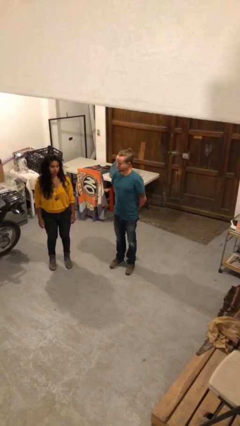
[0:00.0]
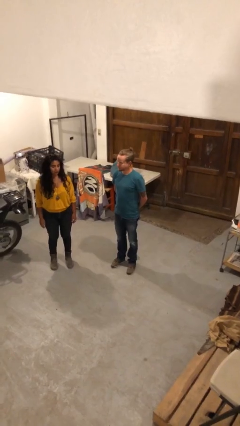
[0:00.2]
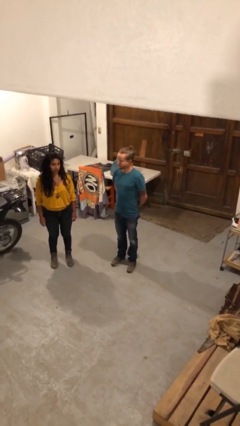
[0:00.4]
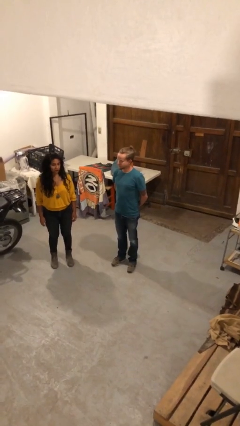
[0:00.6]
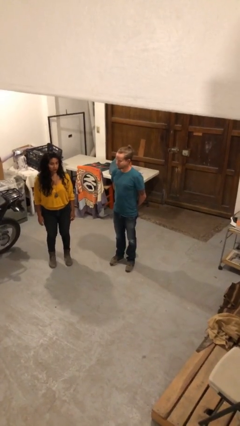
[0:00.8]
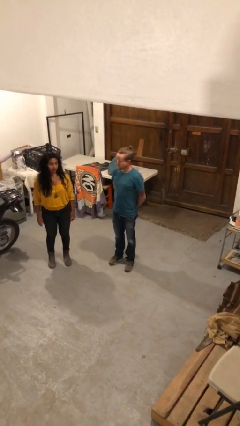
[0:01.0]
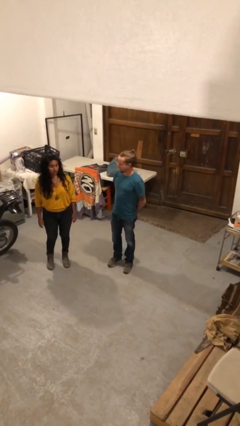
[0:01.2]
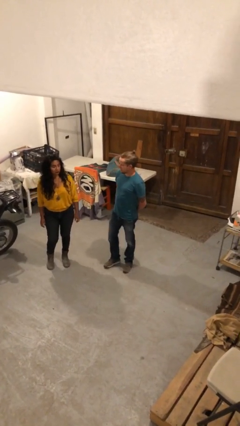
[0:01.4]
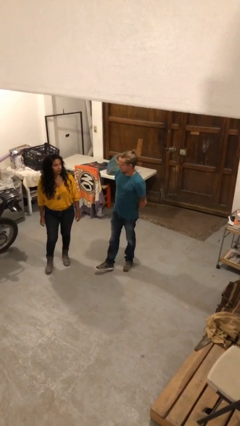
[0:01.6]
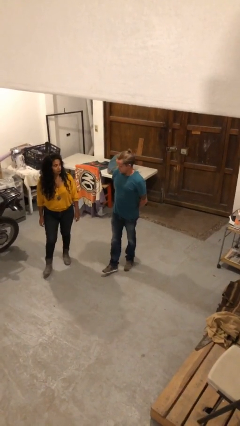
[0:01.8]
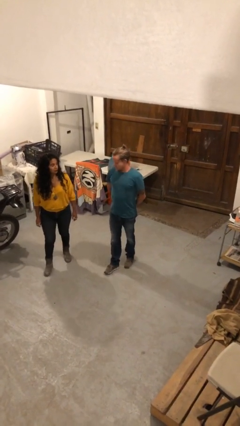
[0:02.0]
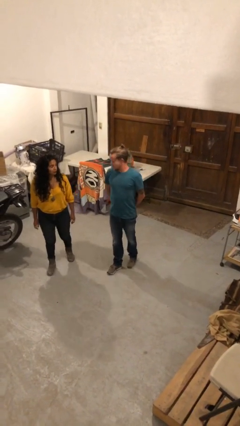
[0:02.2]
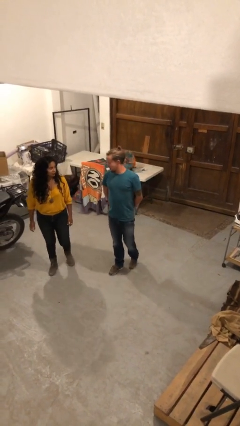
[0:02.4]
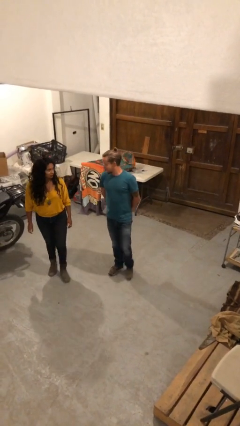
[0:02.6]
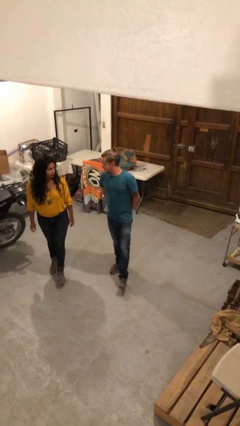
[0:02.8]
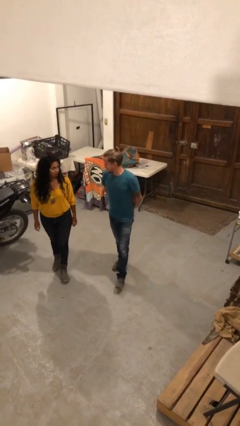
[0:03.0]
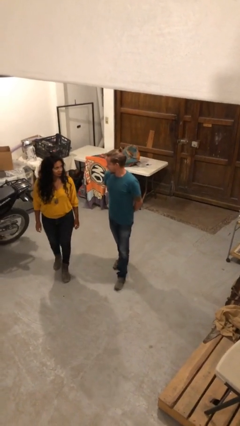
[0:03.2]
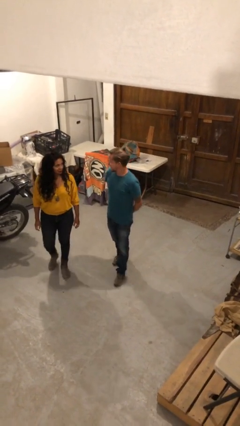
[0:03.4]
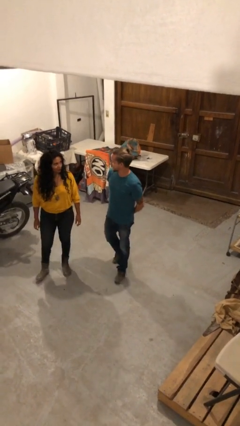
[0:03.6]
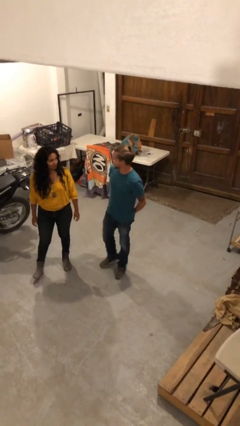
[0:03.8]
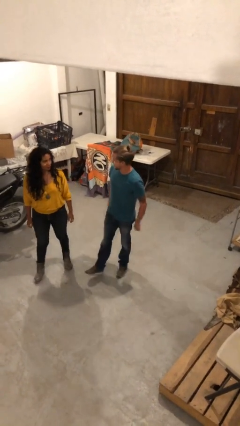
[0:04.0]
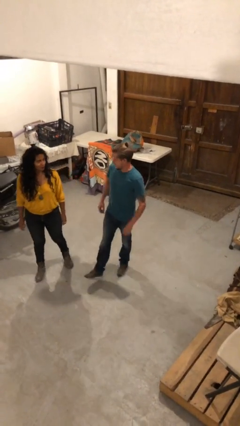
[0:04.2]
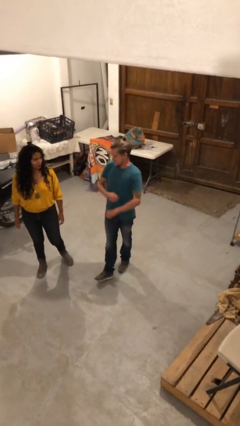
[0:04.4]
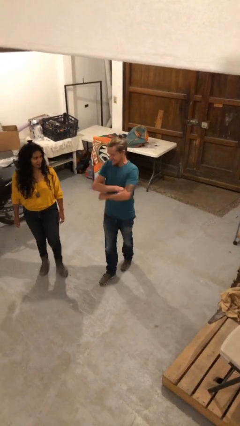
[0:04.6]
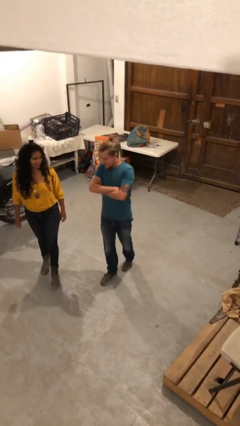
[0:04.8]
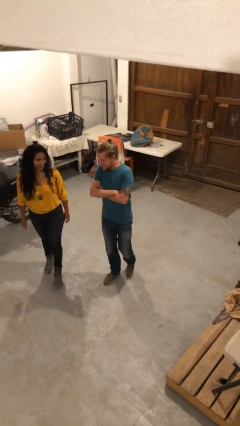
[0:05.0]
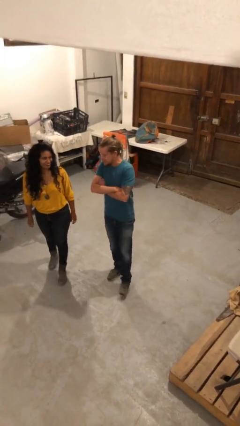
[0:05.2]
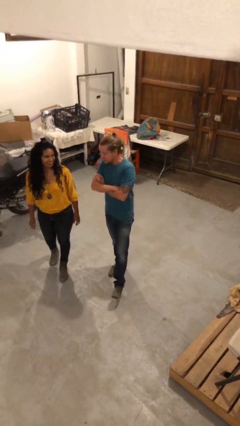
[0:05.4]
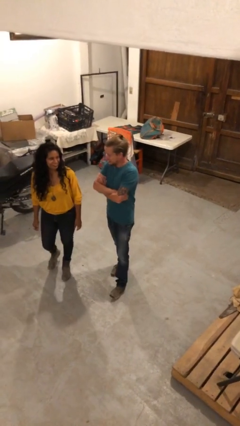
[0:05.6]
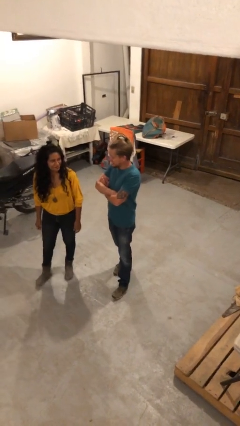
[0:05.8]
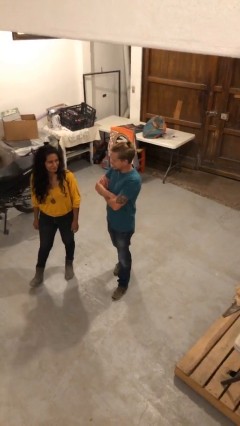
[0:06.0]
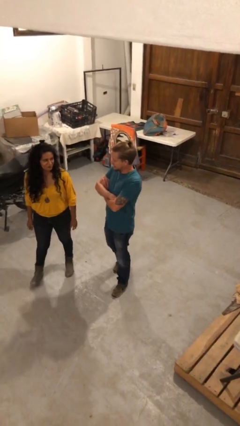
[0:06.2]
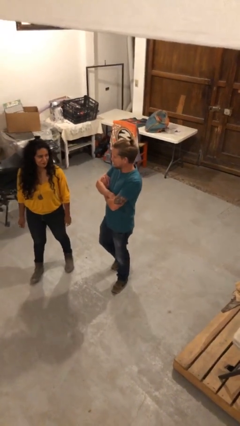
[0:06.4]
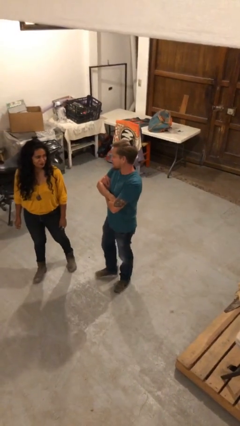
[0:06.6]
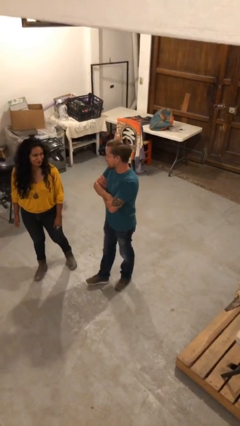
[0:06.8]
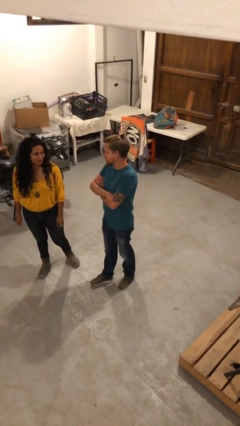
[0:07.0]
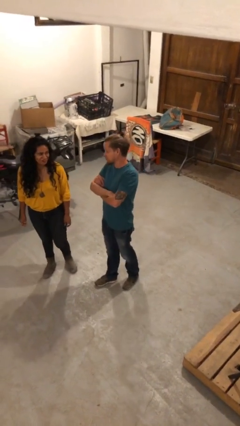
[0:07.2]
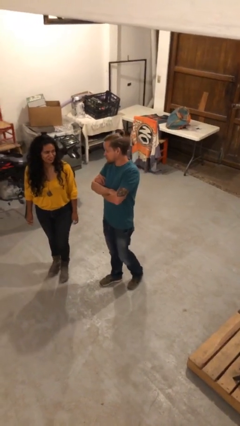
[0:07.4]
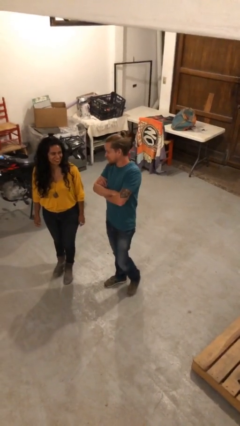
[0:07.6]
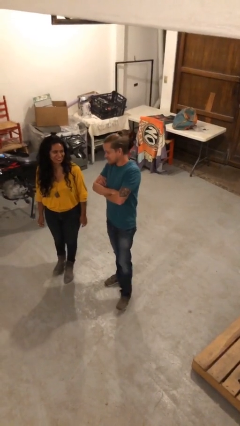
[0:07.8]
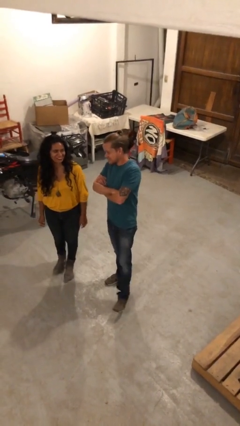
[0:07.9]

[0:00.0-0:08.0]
person talks to person

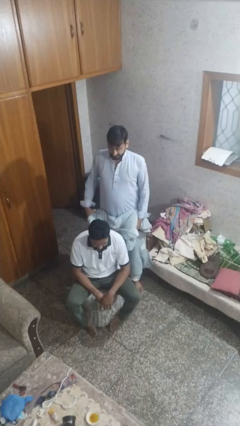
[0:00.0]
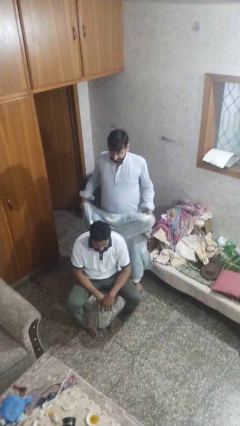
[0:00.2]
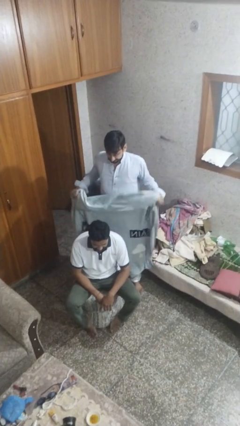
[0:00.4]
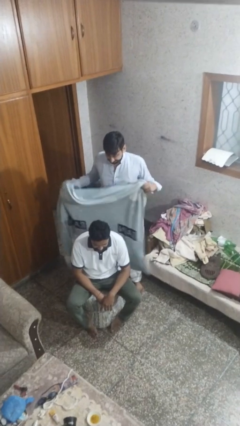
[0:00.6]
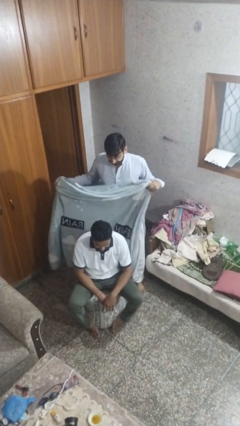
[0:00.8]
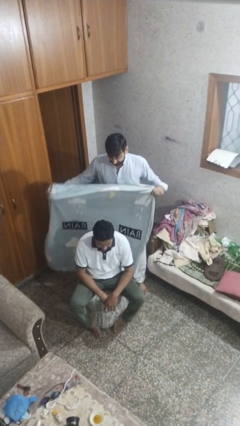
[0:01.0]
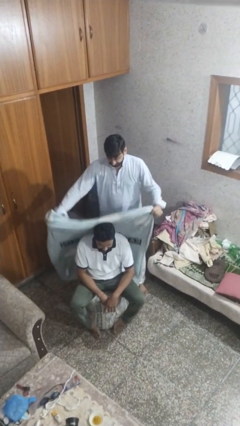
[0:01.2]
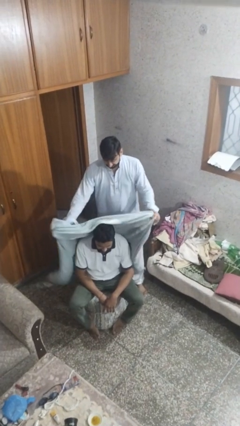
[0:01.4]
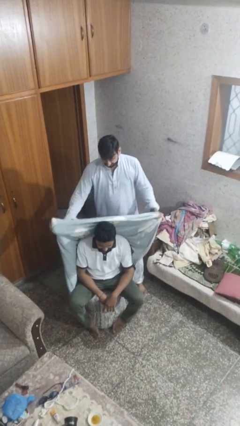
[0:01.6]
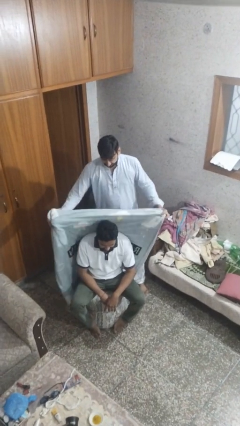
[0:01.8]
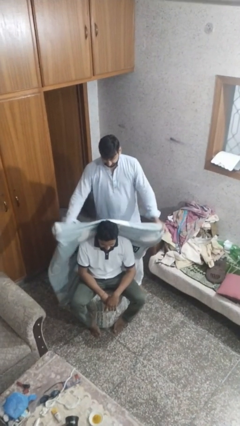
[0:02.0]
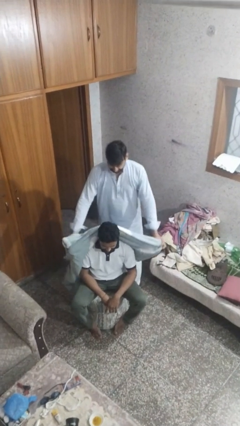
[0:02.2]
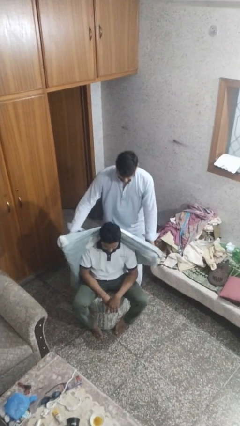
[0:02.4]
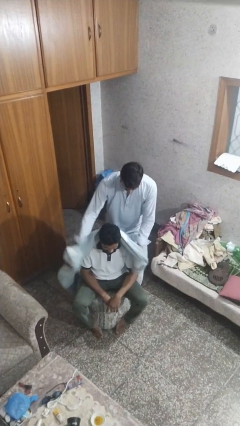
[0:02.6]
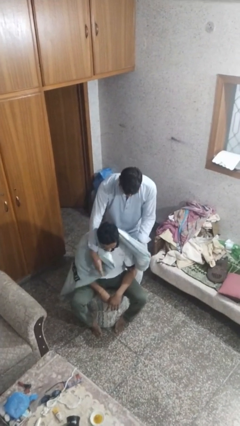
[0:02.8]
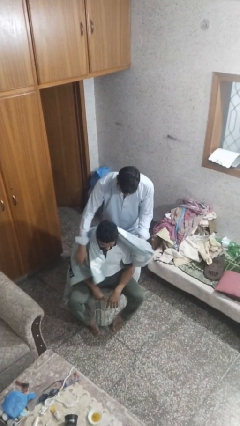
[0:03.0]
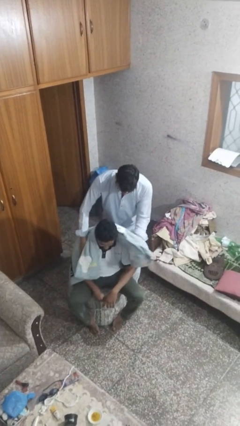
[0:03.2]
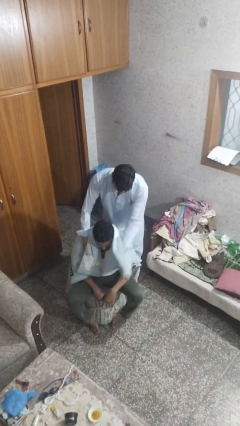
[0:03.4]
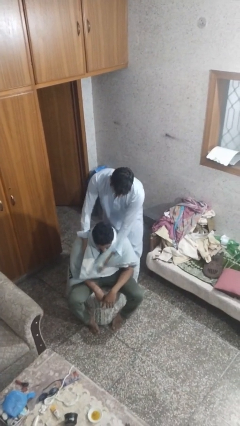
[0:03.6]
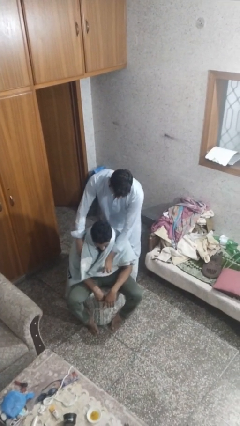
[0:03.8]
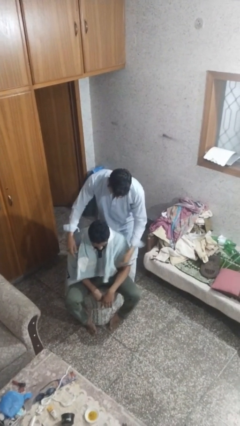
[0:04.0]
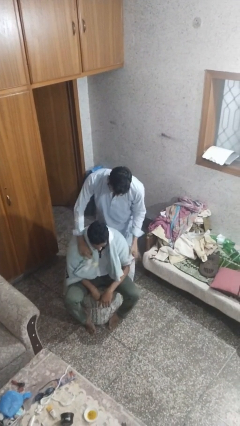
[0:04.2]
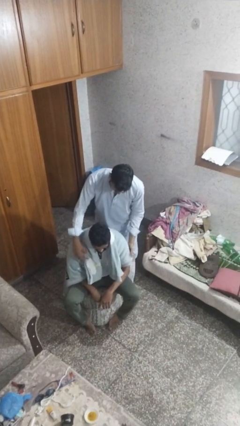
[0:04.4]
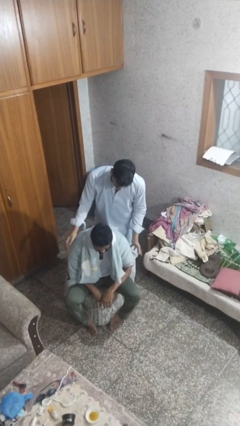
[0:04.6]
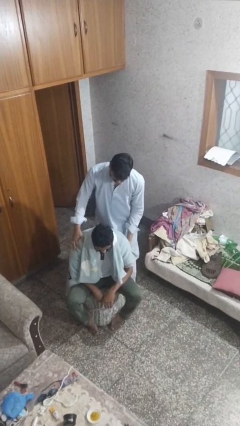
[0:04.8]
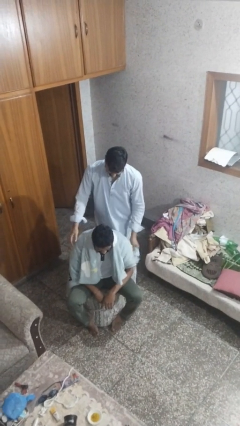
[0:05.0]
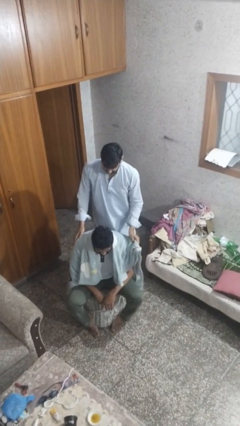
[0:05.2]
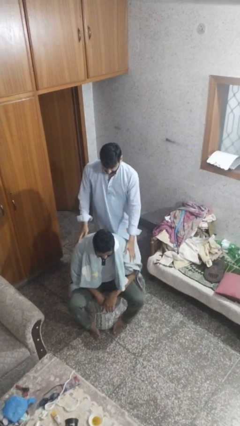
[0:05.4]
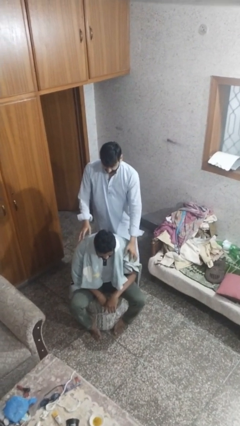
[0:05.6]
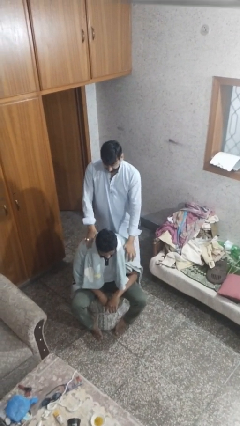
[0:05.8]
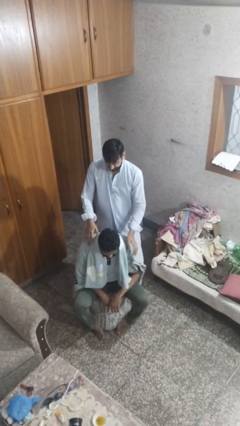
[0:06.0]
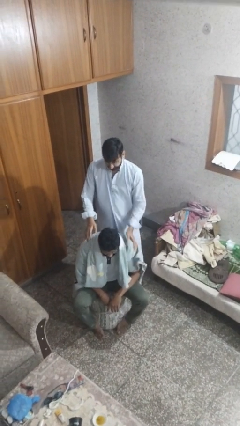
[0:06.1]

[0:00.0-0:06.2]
person covers friend with blanket

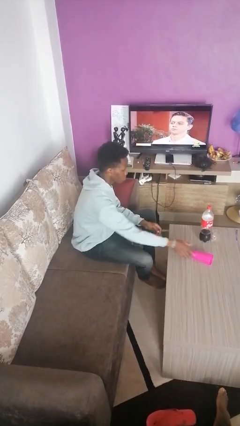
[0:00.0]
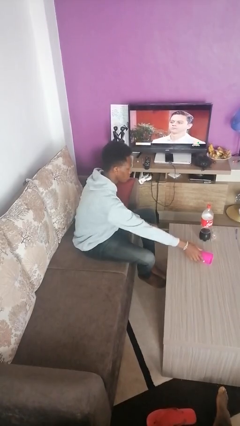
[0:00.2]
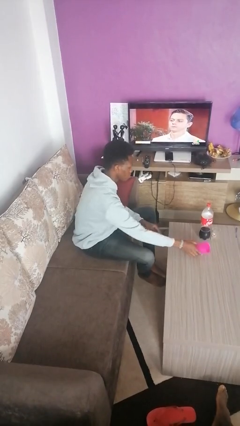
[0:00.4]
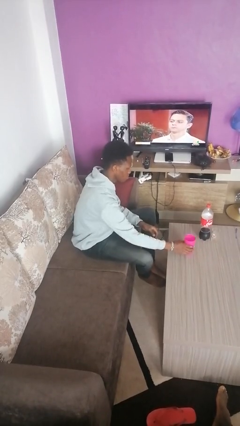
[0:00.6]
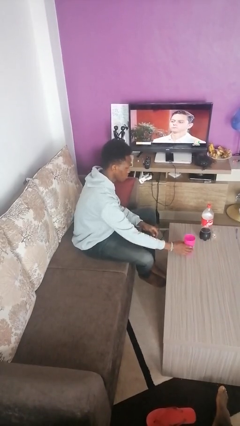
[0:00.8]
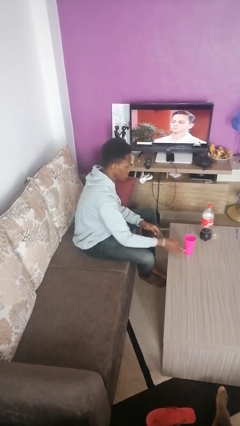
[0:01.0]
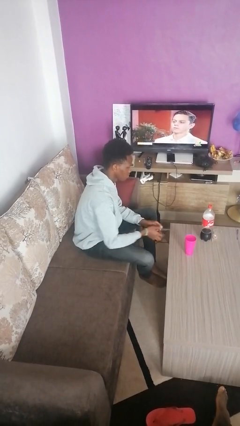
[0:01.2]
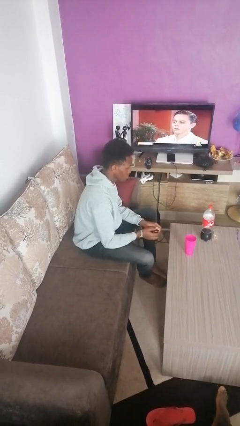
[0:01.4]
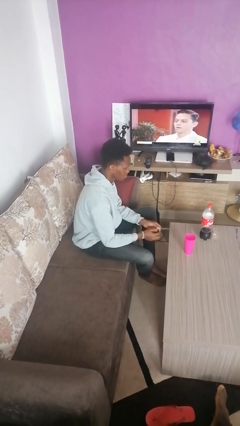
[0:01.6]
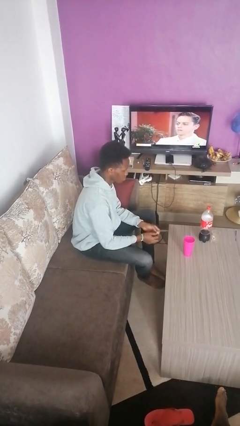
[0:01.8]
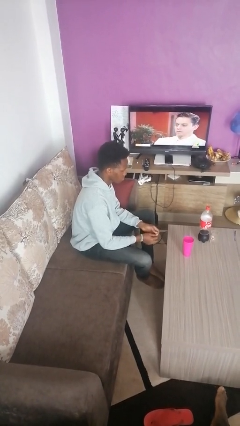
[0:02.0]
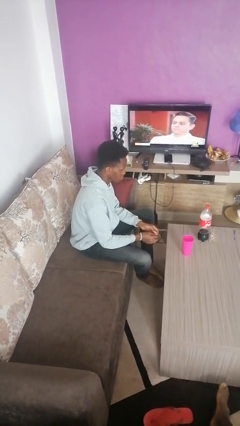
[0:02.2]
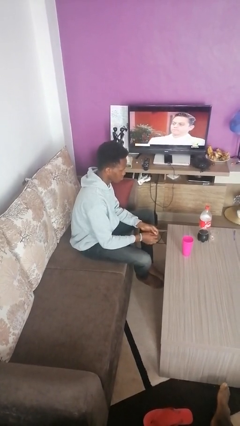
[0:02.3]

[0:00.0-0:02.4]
person sets upright glass

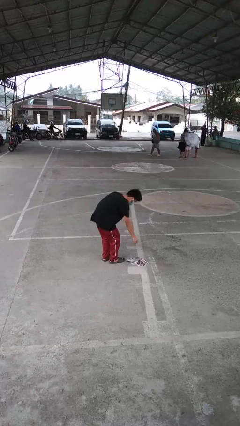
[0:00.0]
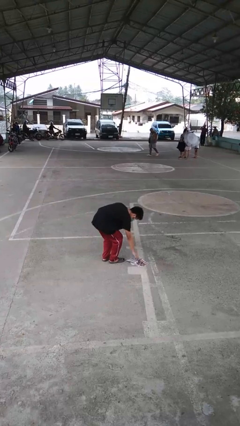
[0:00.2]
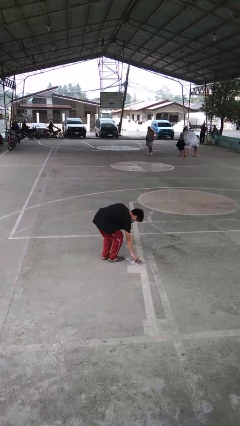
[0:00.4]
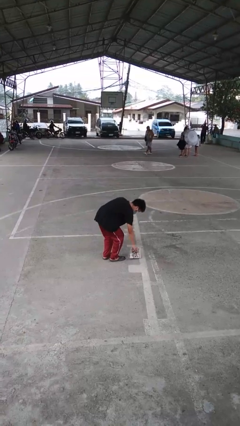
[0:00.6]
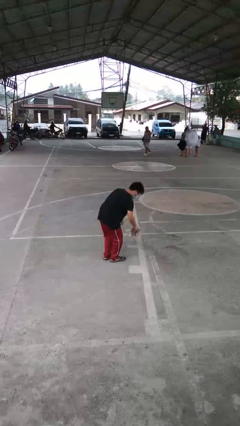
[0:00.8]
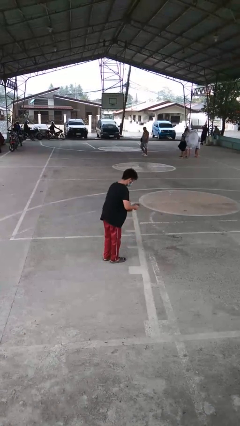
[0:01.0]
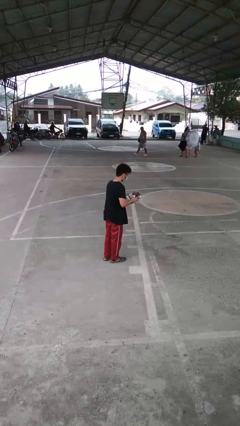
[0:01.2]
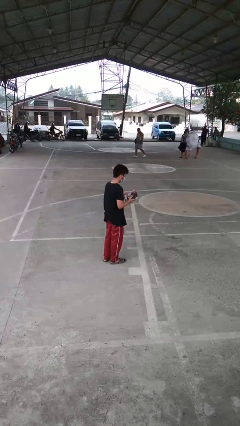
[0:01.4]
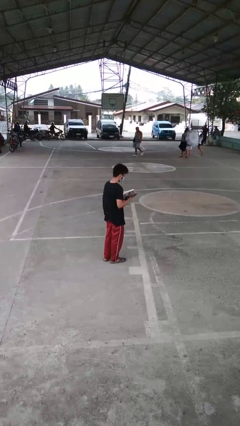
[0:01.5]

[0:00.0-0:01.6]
person picks up object from floor
